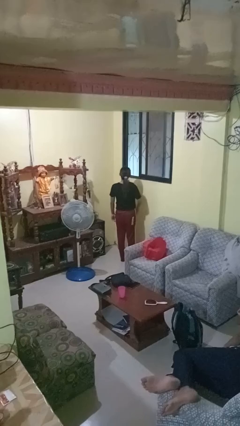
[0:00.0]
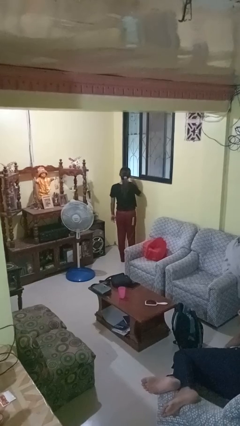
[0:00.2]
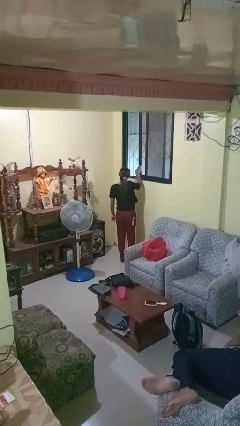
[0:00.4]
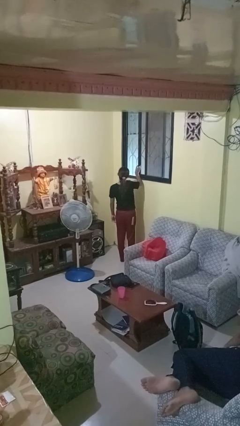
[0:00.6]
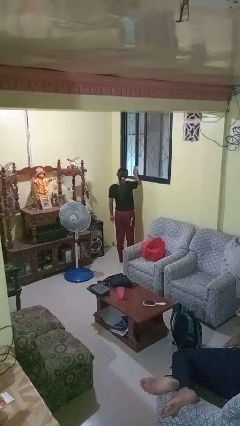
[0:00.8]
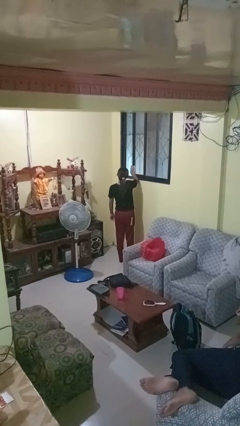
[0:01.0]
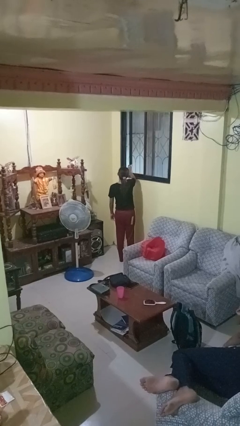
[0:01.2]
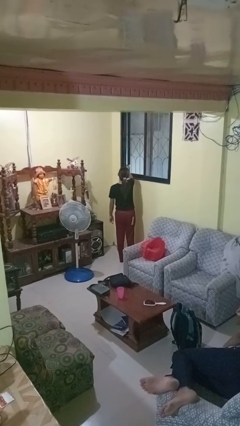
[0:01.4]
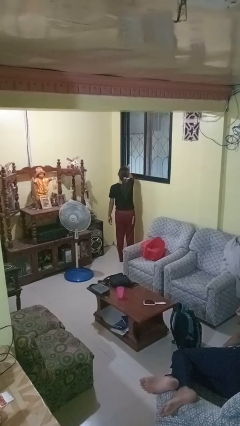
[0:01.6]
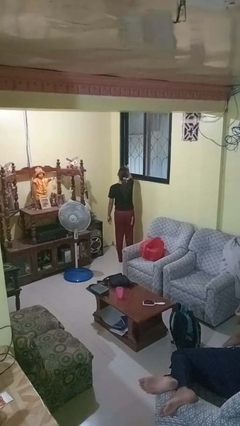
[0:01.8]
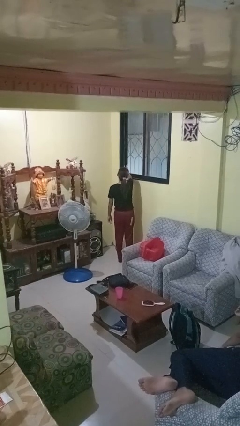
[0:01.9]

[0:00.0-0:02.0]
person closes home window

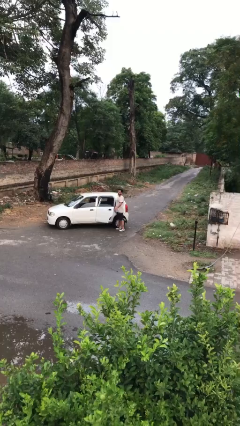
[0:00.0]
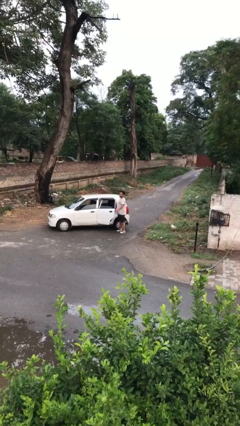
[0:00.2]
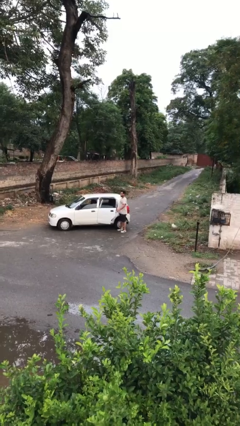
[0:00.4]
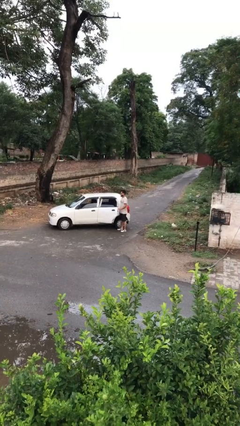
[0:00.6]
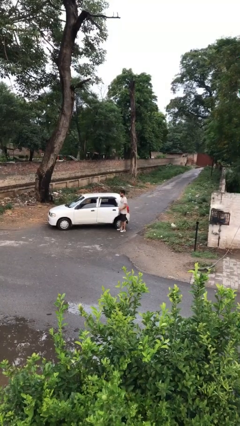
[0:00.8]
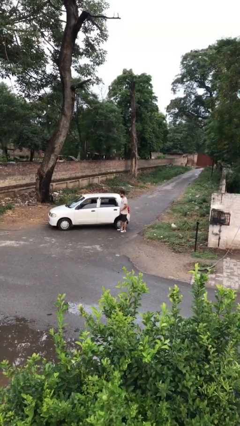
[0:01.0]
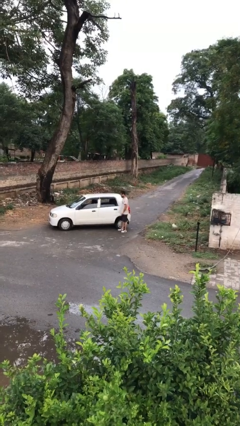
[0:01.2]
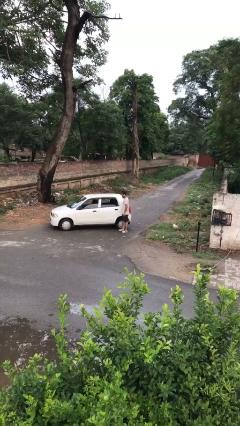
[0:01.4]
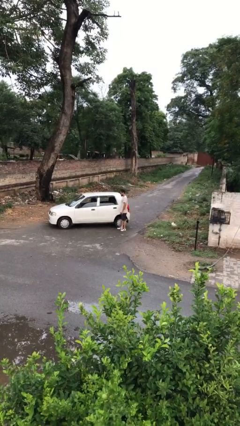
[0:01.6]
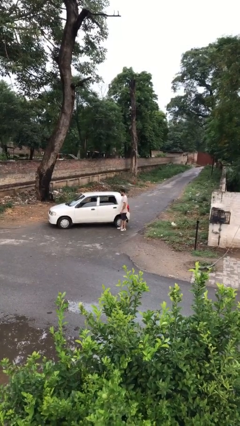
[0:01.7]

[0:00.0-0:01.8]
person closes car door

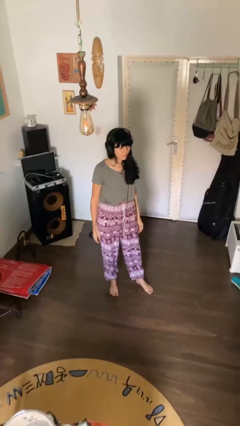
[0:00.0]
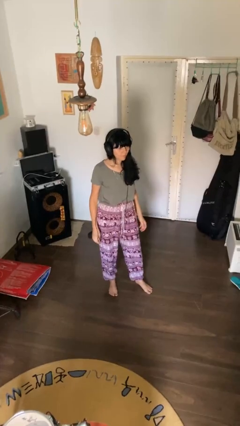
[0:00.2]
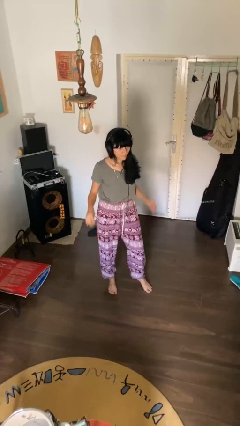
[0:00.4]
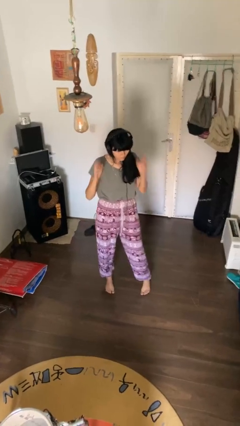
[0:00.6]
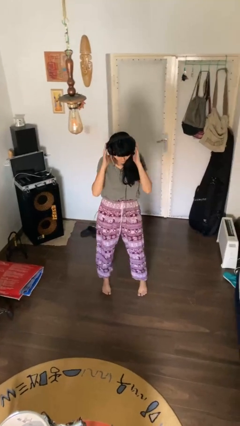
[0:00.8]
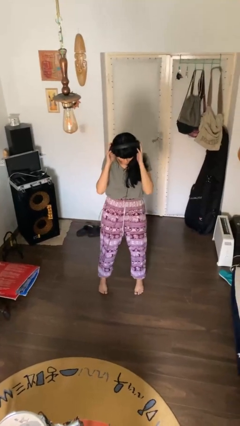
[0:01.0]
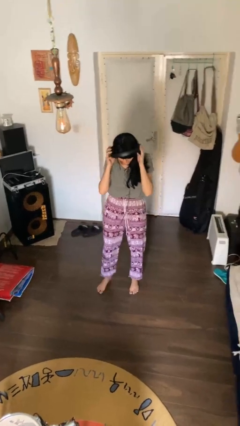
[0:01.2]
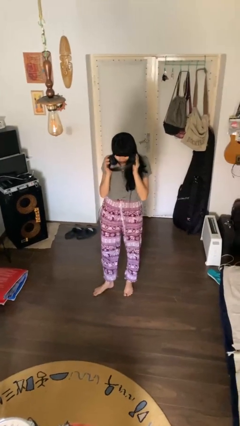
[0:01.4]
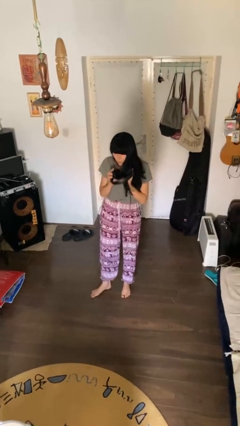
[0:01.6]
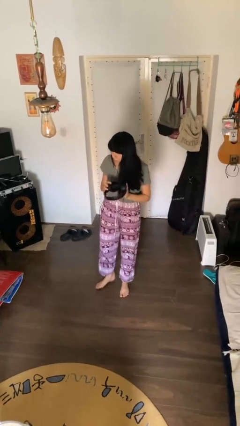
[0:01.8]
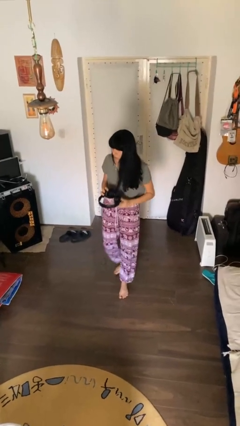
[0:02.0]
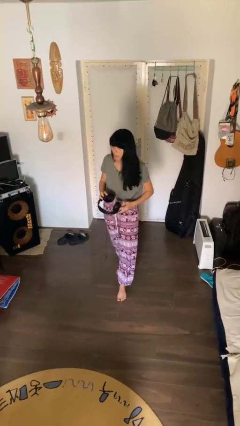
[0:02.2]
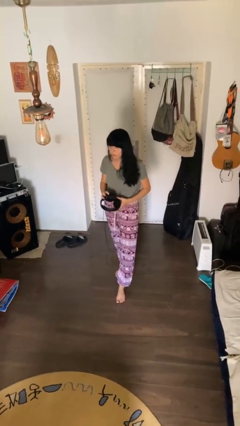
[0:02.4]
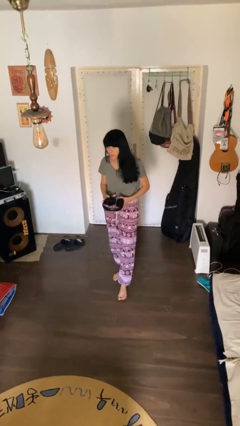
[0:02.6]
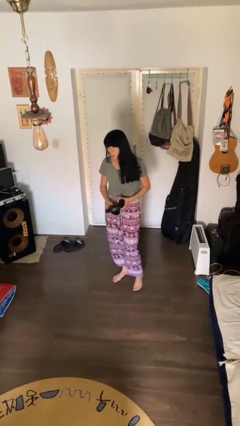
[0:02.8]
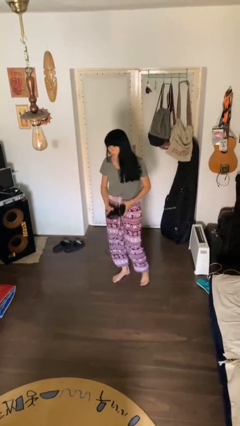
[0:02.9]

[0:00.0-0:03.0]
person takes off headphones

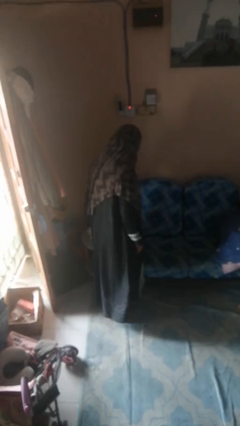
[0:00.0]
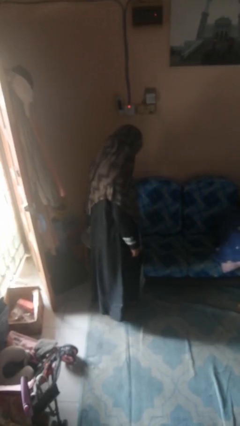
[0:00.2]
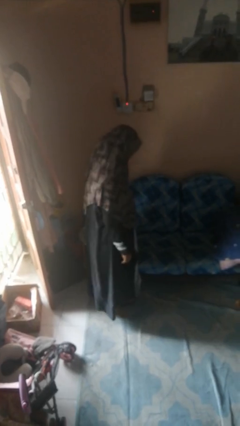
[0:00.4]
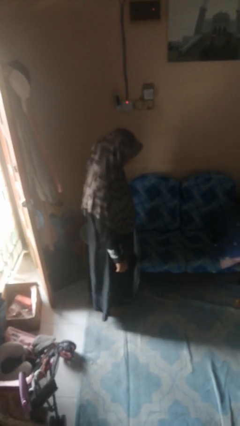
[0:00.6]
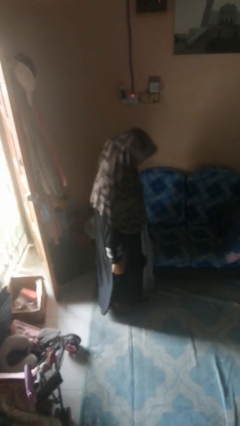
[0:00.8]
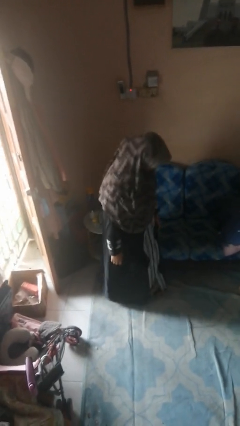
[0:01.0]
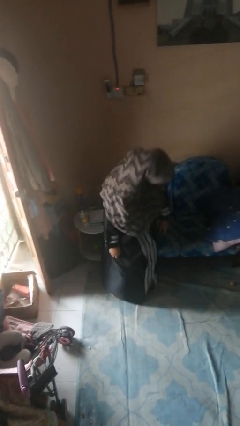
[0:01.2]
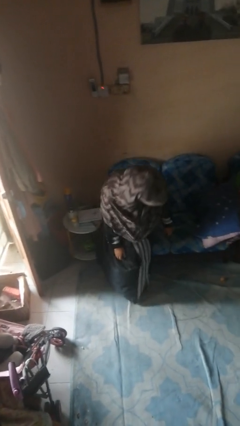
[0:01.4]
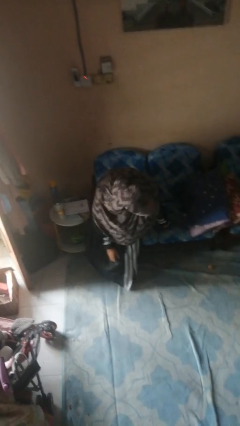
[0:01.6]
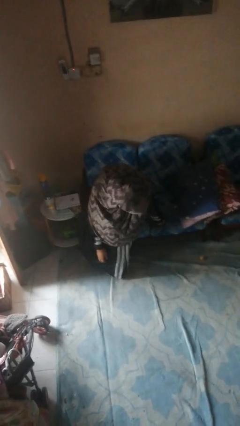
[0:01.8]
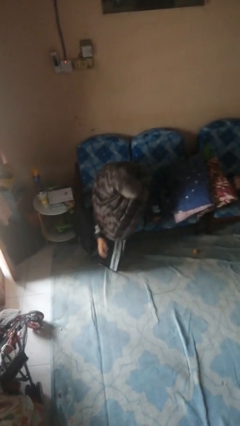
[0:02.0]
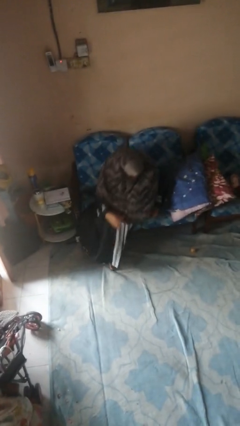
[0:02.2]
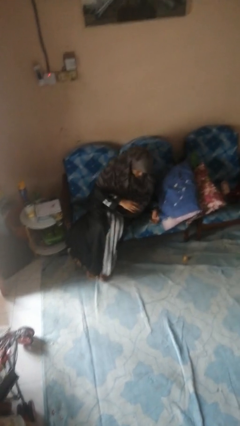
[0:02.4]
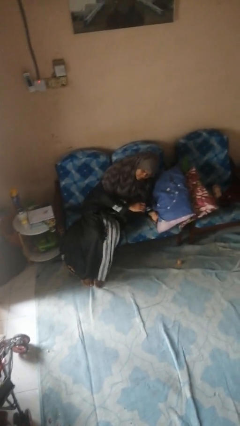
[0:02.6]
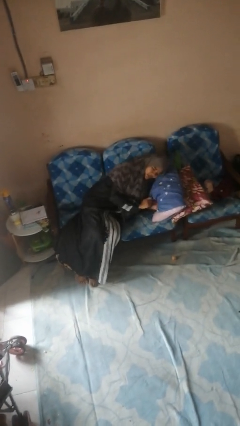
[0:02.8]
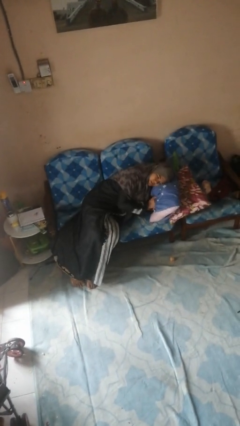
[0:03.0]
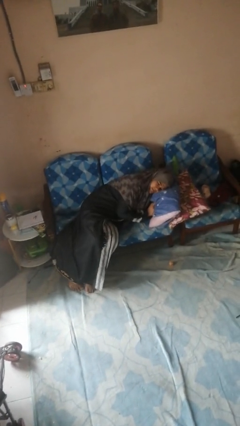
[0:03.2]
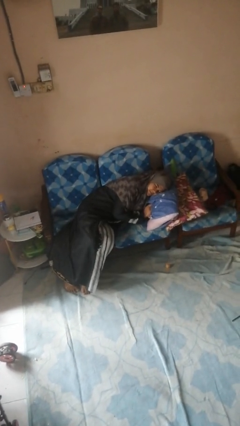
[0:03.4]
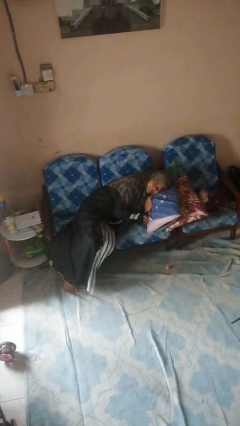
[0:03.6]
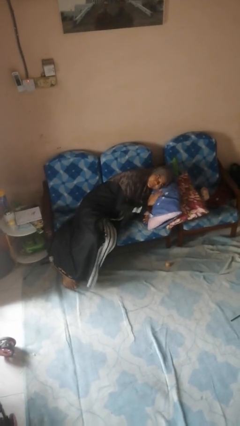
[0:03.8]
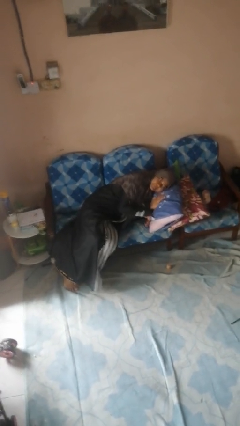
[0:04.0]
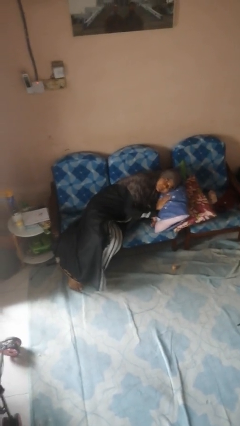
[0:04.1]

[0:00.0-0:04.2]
person lies down on couch

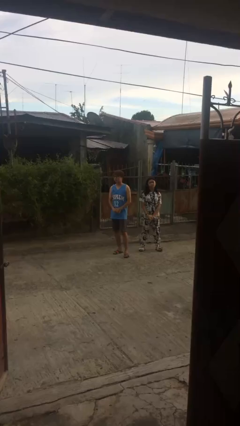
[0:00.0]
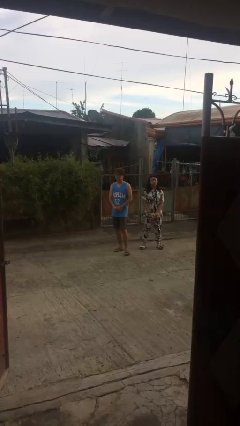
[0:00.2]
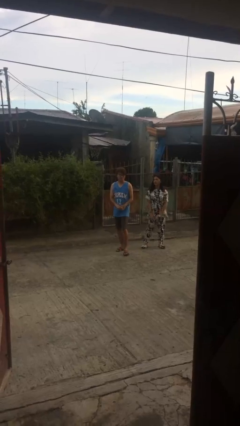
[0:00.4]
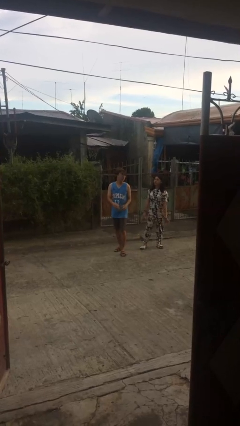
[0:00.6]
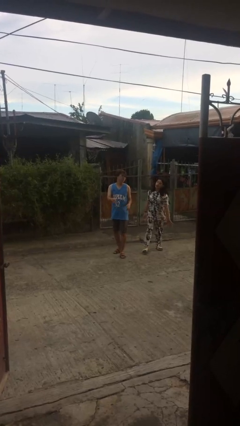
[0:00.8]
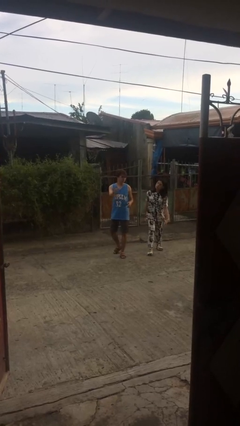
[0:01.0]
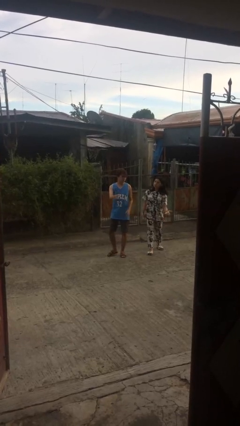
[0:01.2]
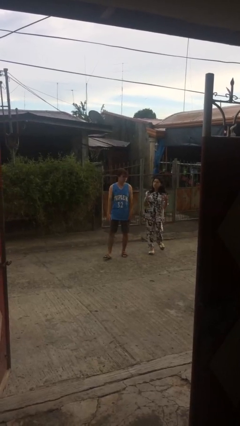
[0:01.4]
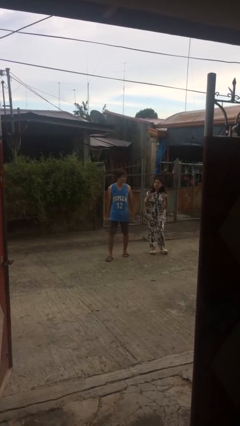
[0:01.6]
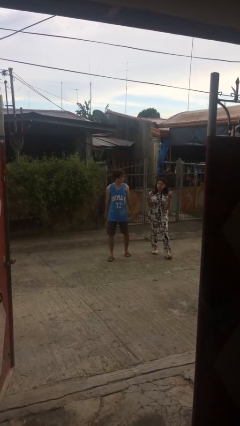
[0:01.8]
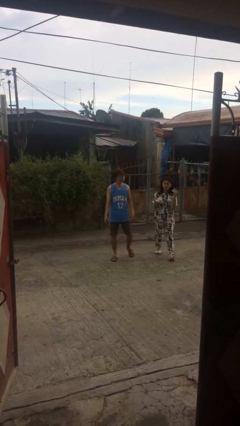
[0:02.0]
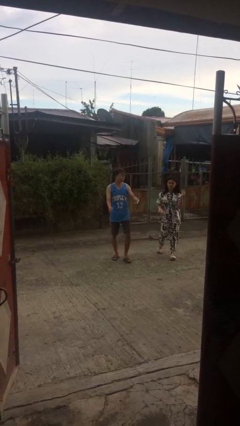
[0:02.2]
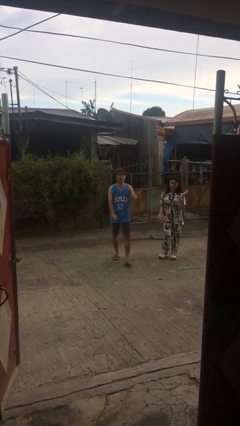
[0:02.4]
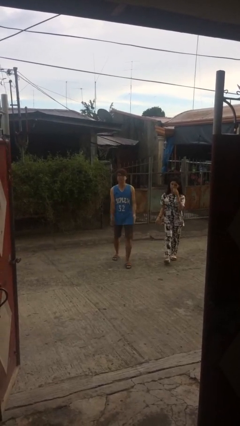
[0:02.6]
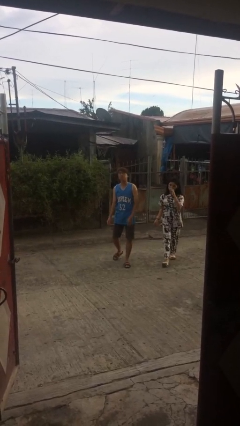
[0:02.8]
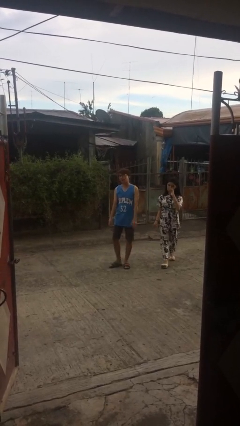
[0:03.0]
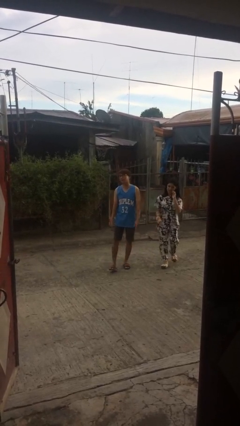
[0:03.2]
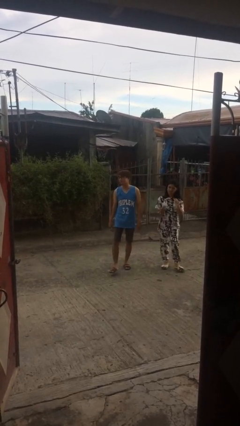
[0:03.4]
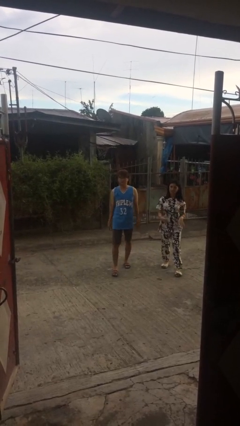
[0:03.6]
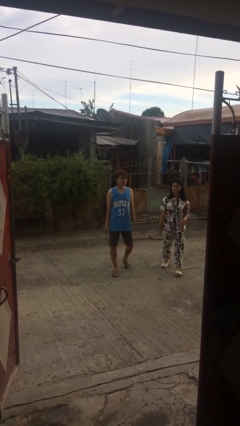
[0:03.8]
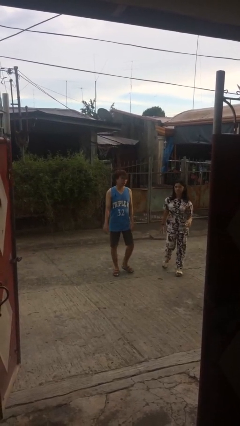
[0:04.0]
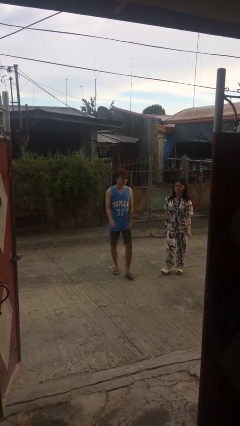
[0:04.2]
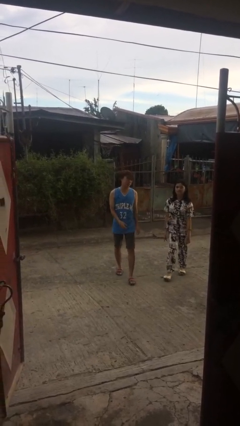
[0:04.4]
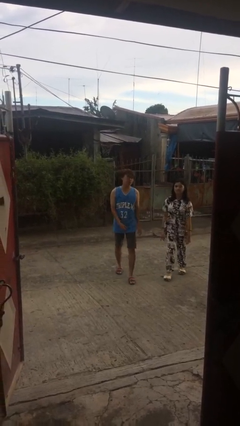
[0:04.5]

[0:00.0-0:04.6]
person talks to person

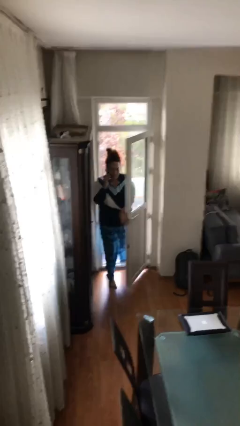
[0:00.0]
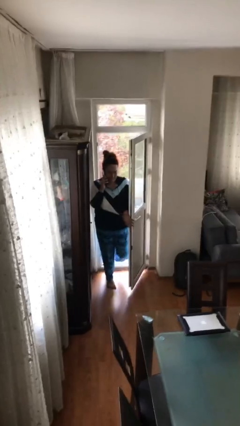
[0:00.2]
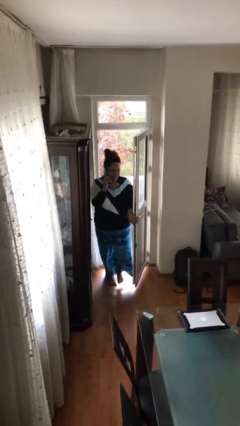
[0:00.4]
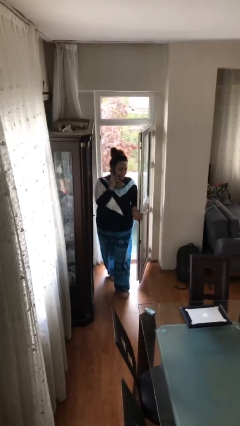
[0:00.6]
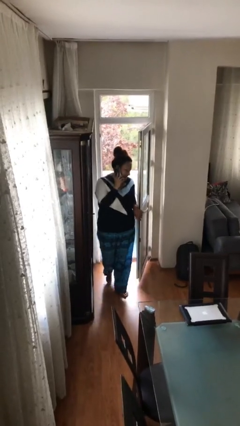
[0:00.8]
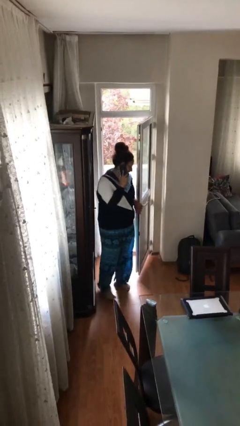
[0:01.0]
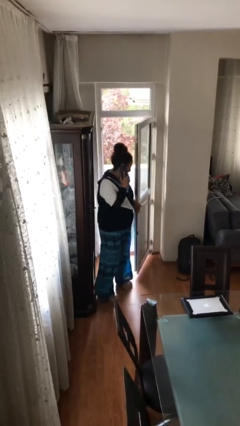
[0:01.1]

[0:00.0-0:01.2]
person enters scene through structure

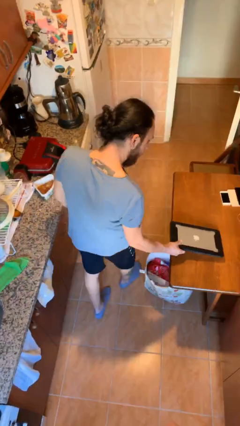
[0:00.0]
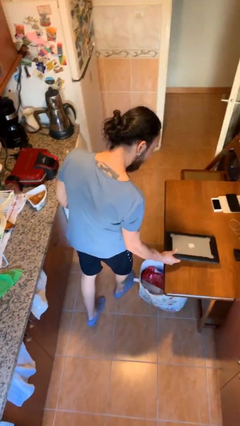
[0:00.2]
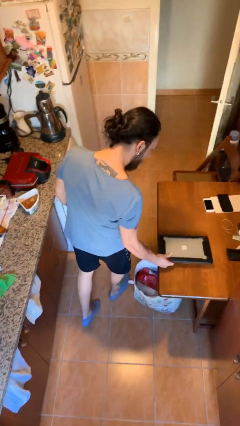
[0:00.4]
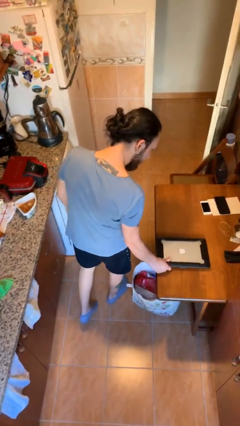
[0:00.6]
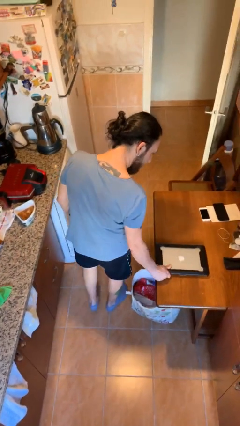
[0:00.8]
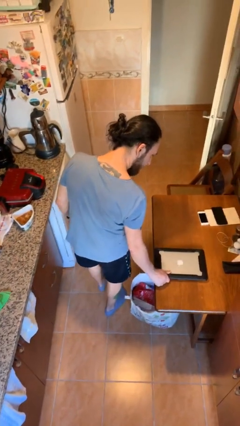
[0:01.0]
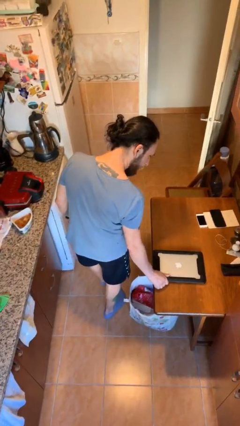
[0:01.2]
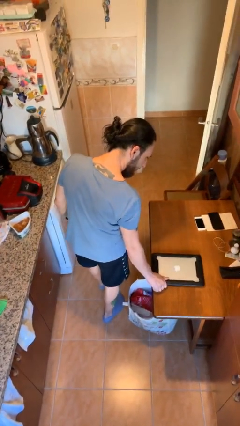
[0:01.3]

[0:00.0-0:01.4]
person puts down object on table
